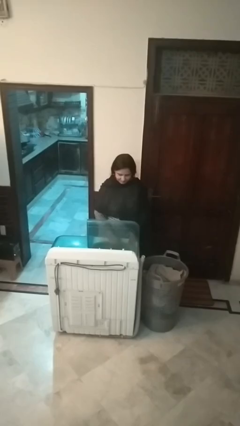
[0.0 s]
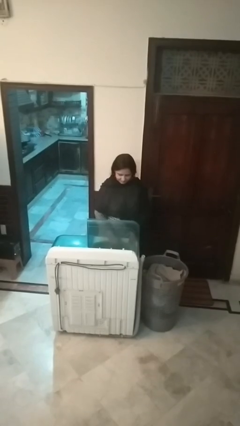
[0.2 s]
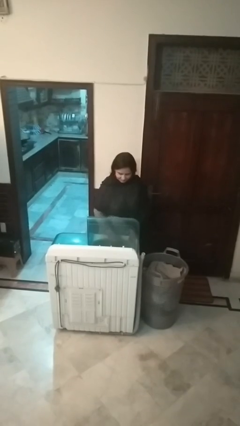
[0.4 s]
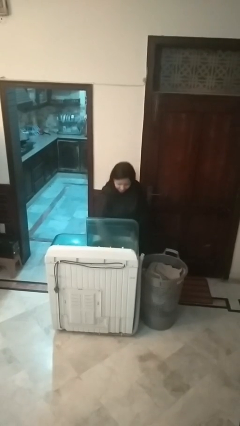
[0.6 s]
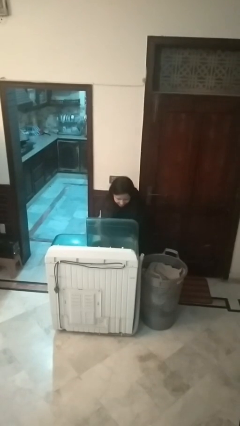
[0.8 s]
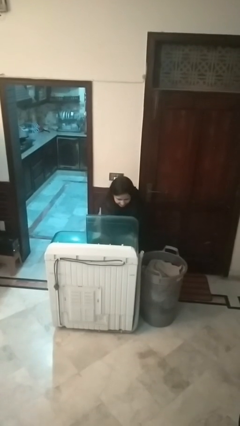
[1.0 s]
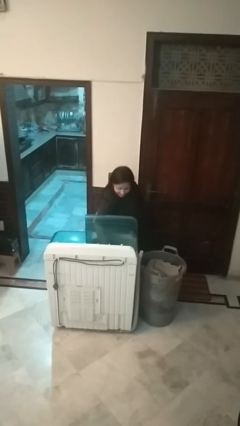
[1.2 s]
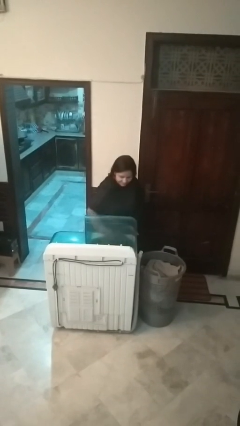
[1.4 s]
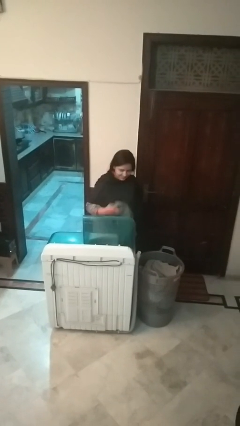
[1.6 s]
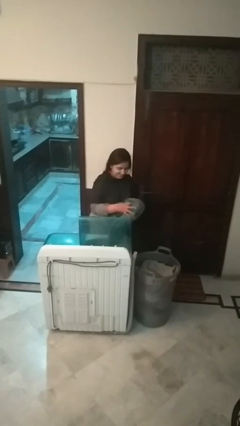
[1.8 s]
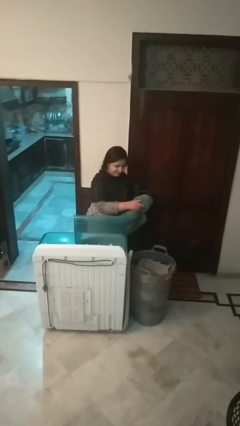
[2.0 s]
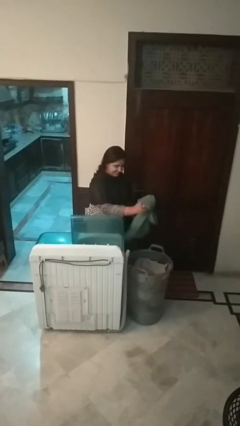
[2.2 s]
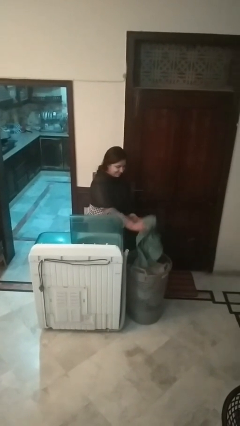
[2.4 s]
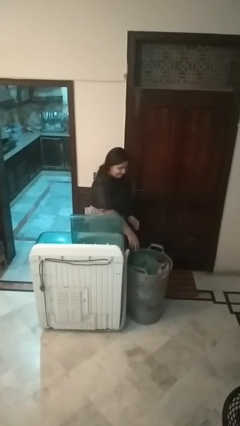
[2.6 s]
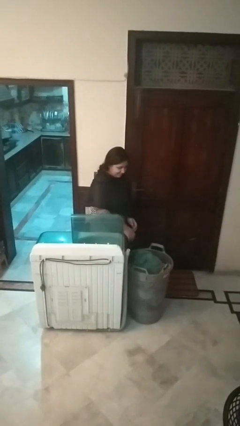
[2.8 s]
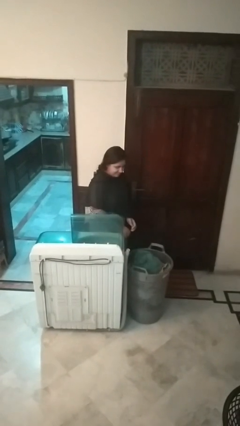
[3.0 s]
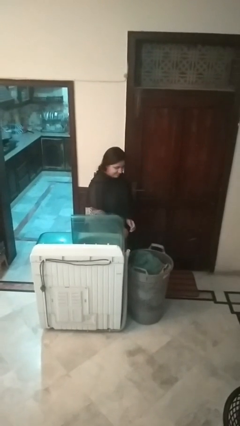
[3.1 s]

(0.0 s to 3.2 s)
person unloads clotheswasher

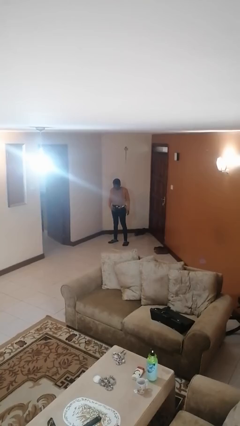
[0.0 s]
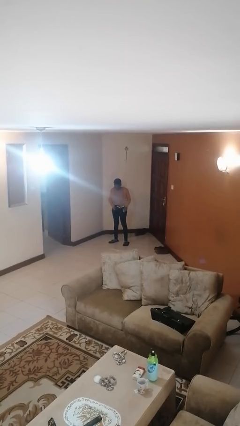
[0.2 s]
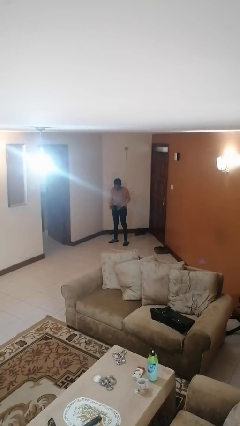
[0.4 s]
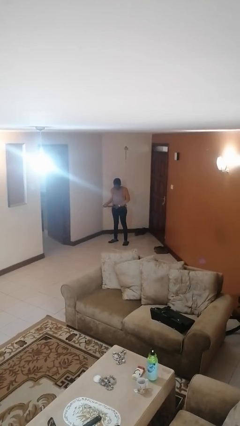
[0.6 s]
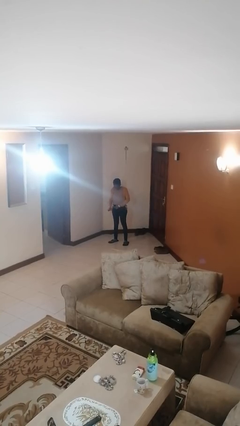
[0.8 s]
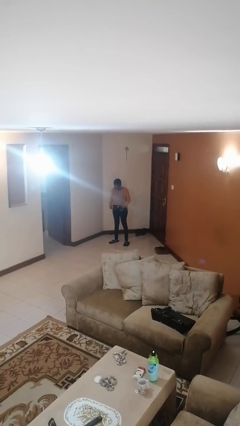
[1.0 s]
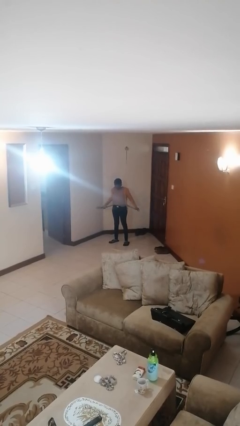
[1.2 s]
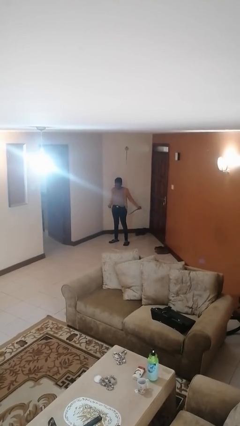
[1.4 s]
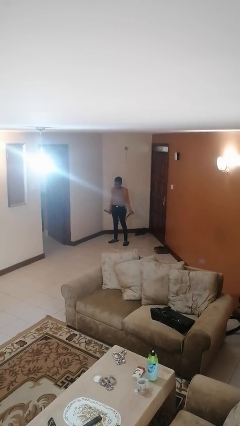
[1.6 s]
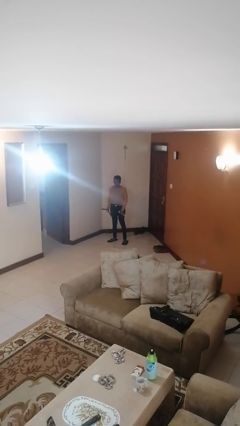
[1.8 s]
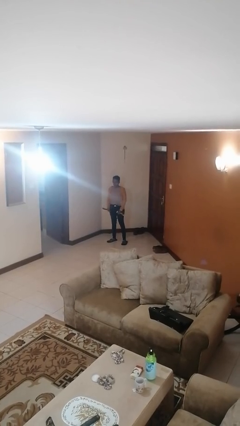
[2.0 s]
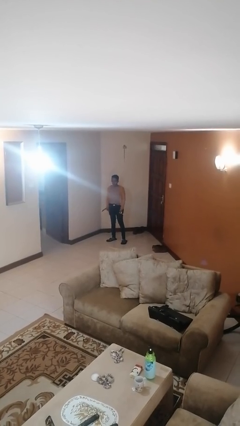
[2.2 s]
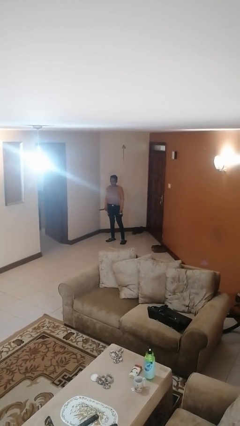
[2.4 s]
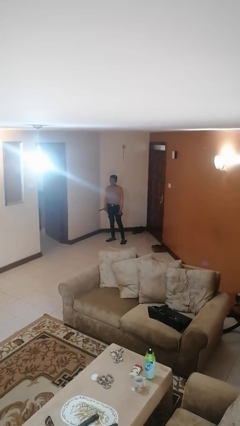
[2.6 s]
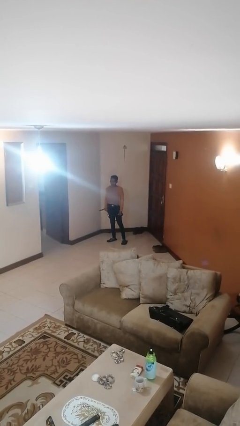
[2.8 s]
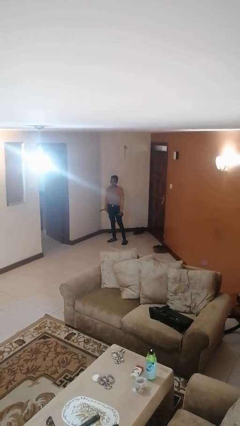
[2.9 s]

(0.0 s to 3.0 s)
person takes off belt

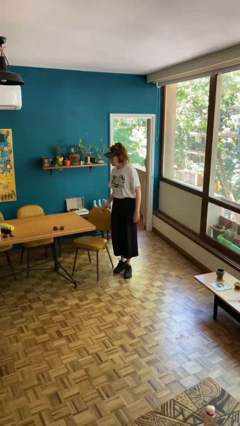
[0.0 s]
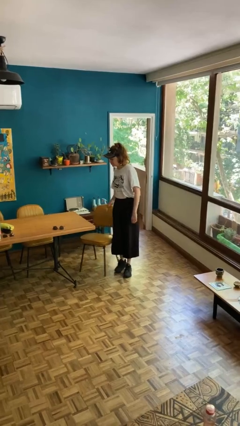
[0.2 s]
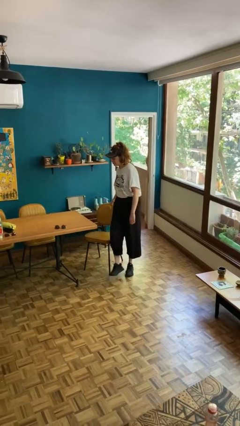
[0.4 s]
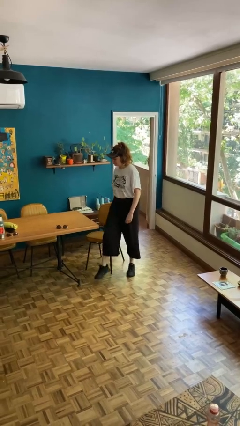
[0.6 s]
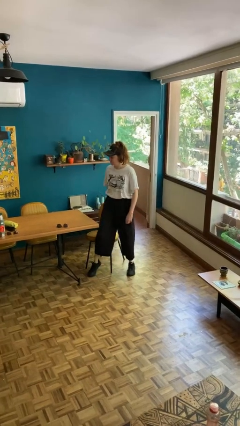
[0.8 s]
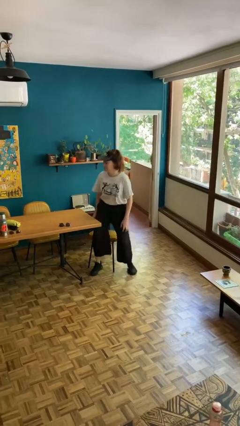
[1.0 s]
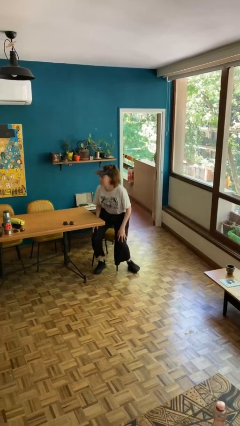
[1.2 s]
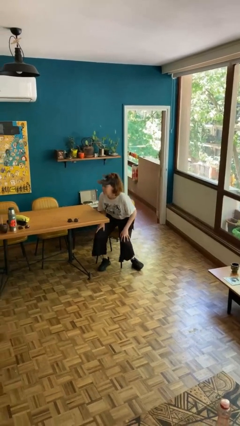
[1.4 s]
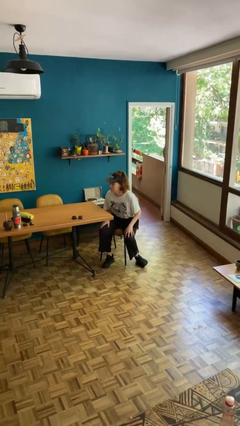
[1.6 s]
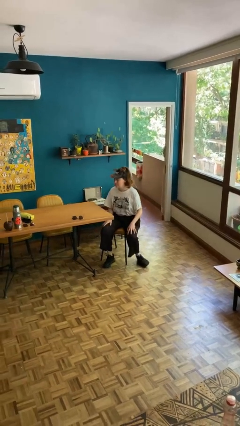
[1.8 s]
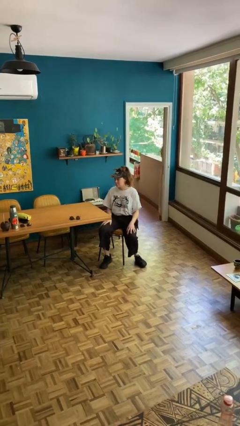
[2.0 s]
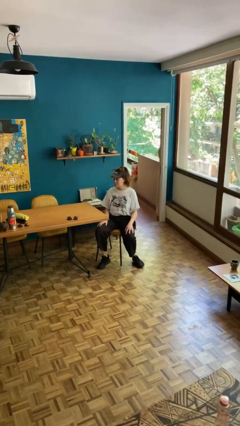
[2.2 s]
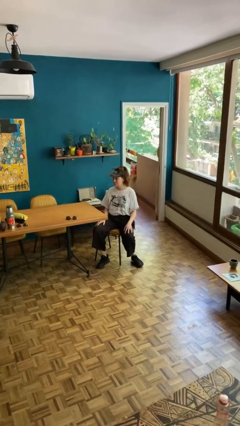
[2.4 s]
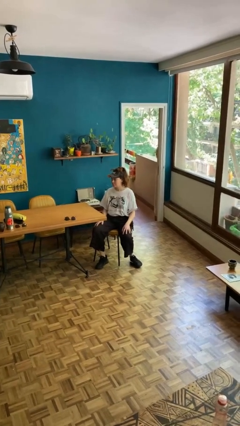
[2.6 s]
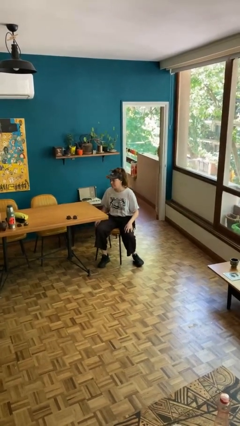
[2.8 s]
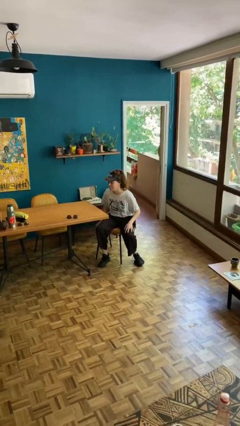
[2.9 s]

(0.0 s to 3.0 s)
person sits down

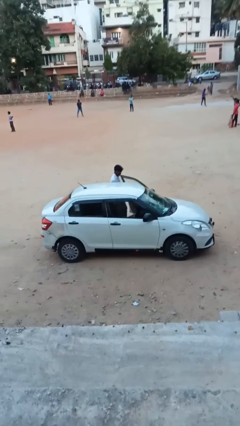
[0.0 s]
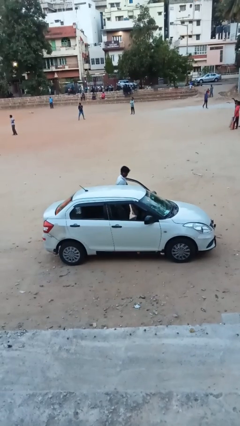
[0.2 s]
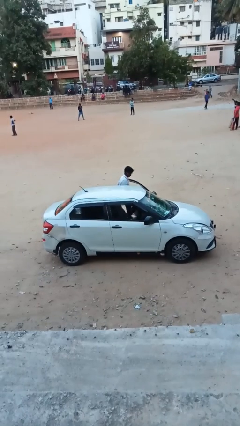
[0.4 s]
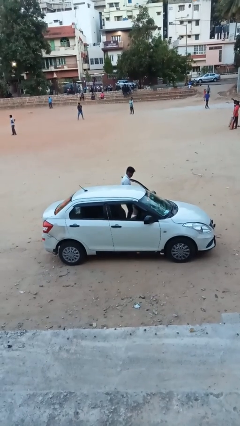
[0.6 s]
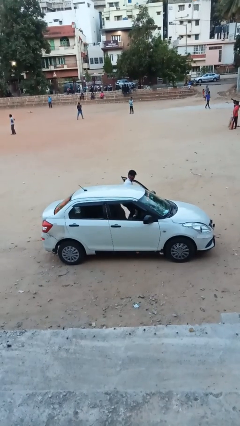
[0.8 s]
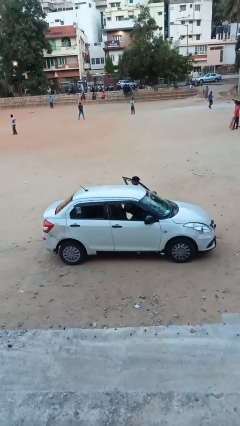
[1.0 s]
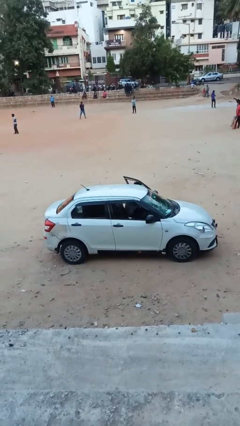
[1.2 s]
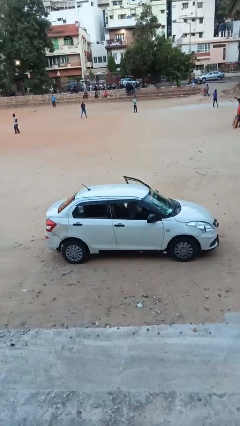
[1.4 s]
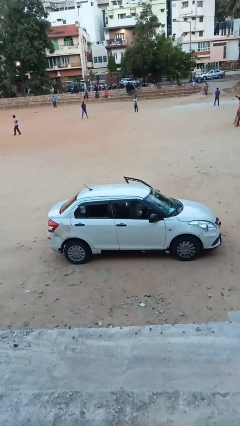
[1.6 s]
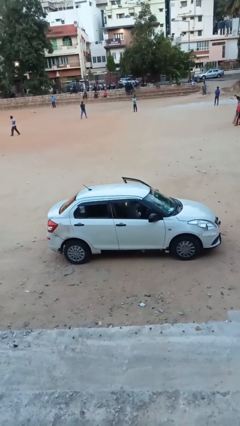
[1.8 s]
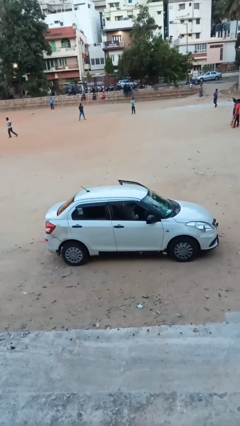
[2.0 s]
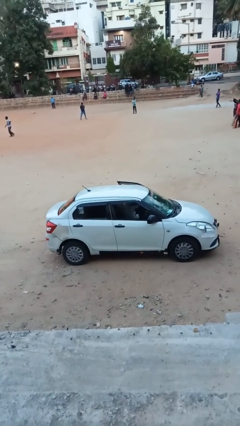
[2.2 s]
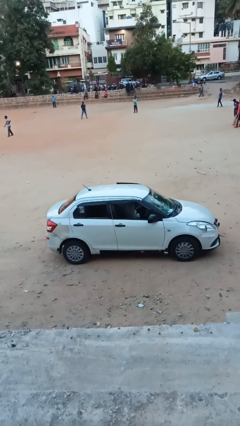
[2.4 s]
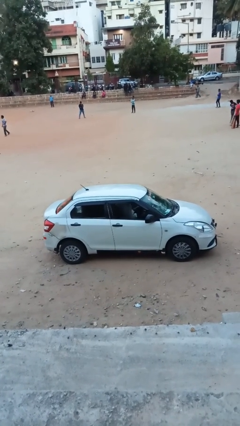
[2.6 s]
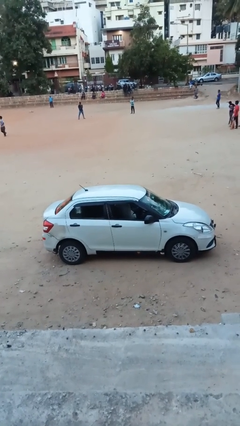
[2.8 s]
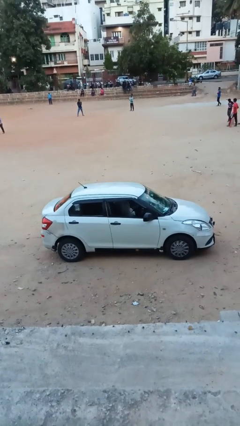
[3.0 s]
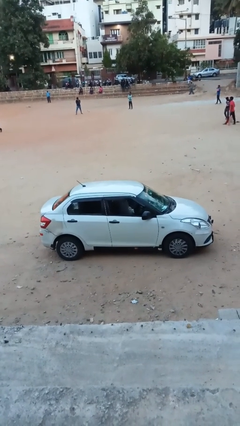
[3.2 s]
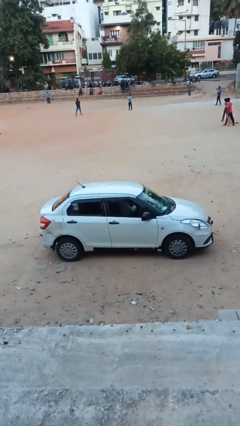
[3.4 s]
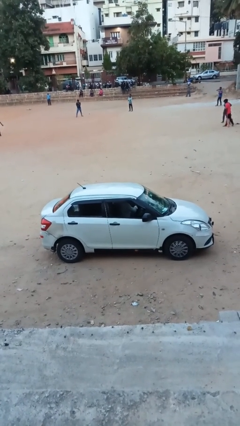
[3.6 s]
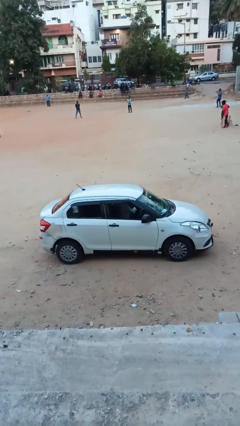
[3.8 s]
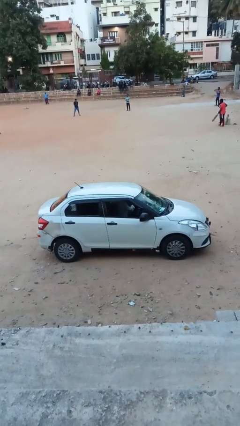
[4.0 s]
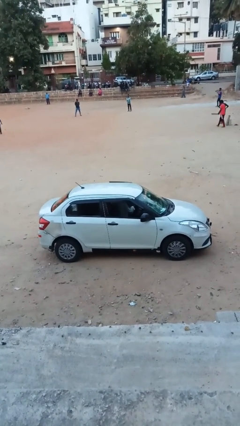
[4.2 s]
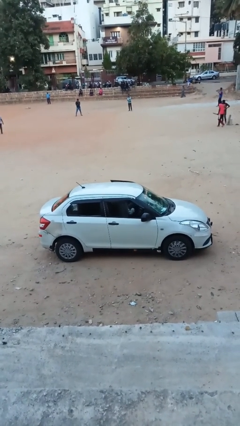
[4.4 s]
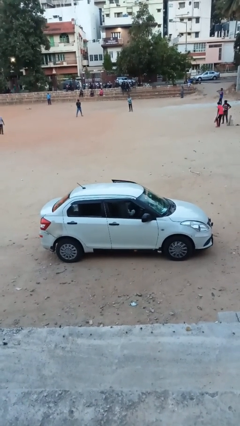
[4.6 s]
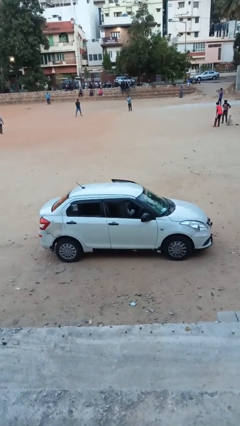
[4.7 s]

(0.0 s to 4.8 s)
car picks up person

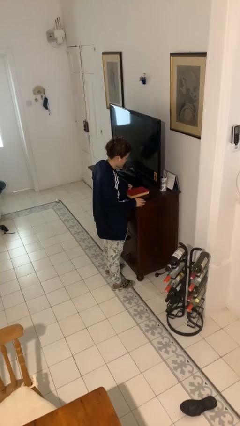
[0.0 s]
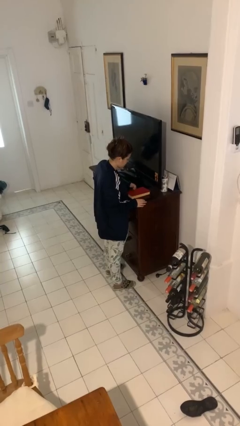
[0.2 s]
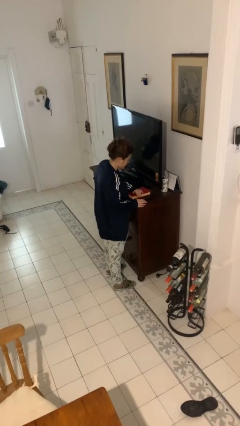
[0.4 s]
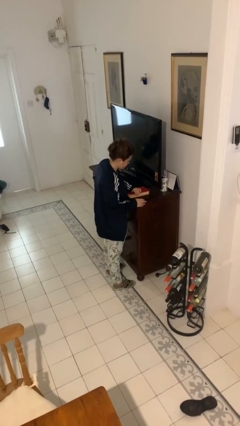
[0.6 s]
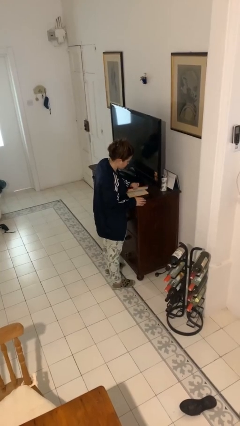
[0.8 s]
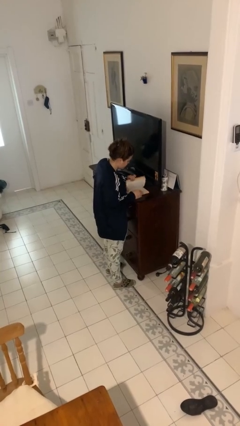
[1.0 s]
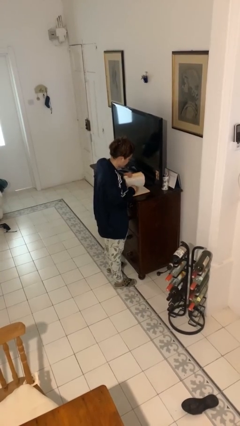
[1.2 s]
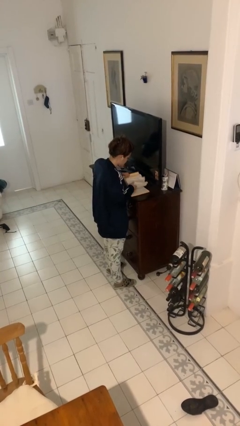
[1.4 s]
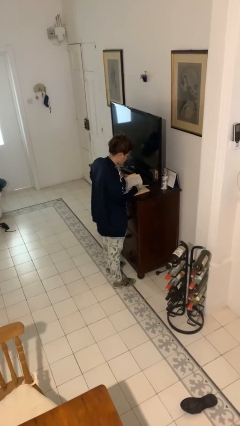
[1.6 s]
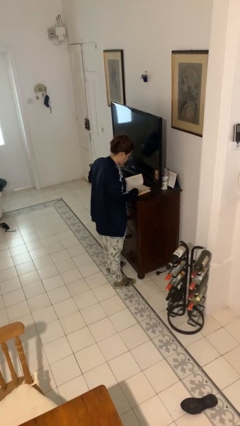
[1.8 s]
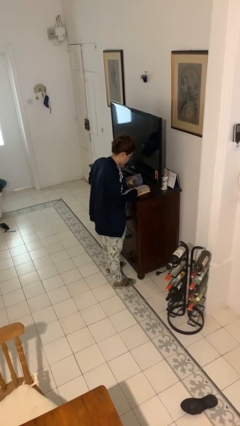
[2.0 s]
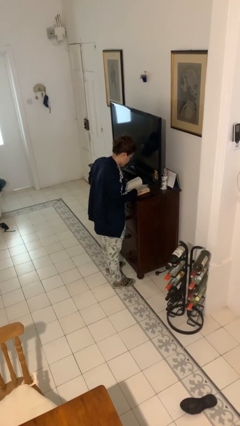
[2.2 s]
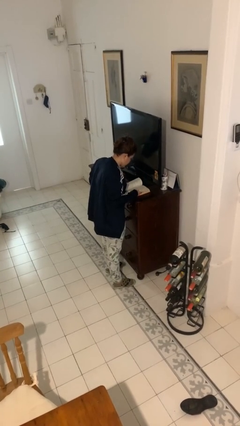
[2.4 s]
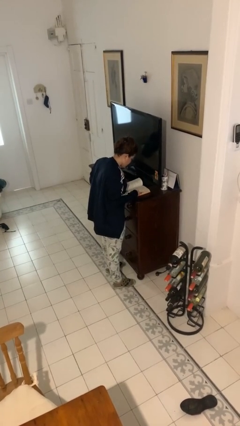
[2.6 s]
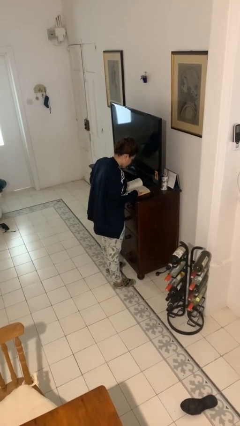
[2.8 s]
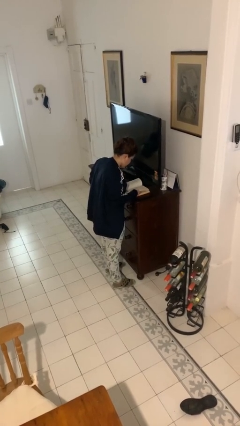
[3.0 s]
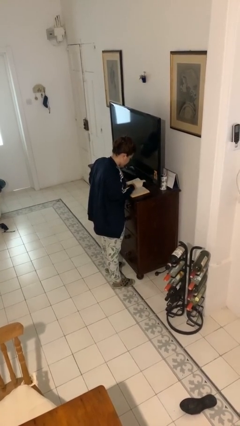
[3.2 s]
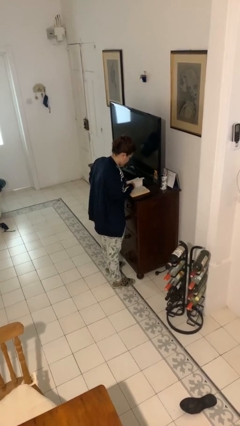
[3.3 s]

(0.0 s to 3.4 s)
person reads book

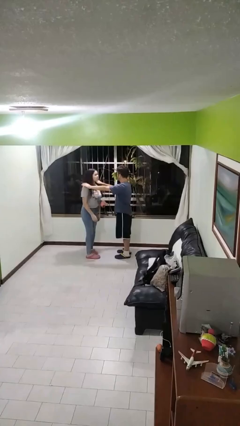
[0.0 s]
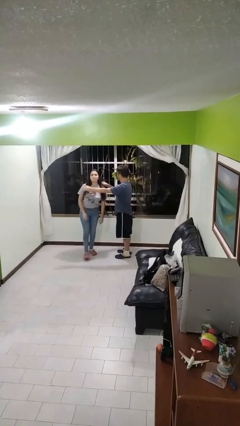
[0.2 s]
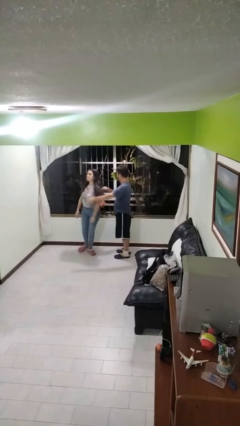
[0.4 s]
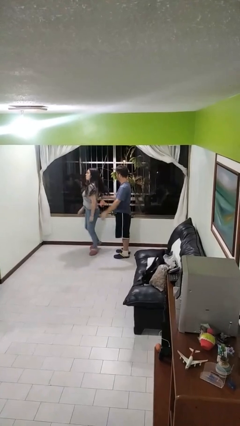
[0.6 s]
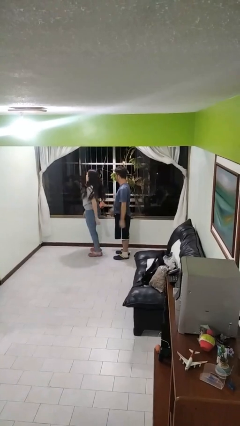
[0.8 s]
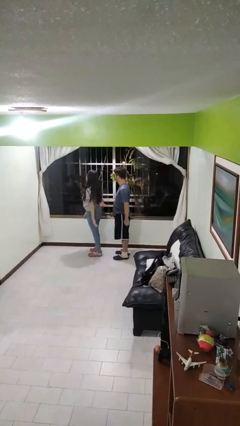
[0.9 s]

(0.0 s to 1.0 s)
person spins person around
